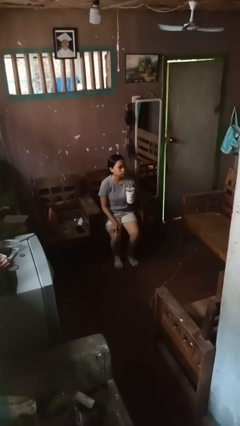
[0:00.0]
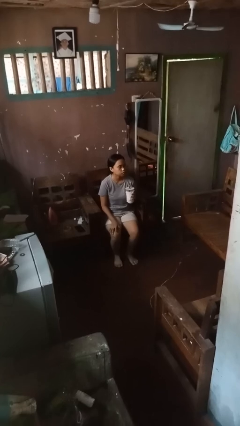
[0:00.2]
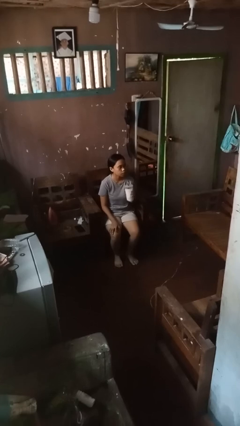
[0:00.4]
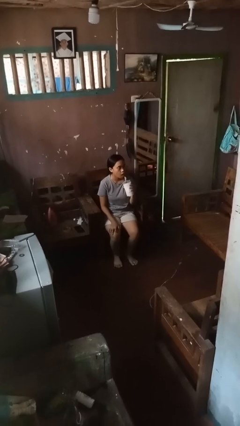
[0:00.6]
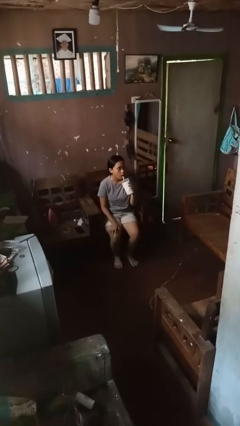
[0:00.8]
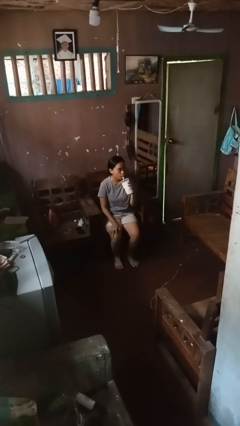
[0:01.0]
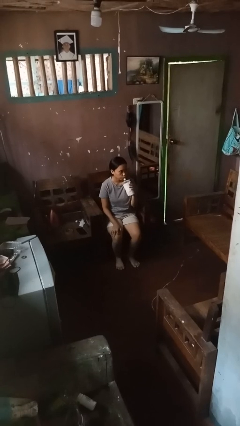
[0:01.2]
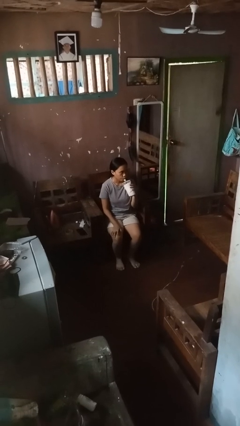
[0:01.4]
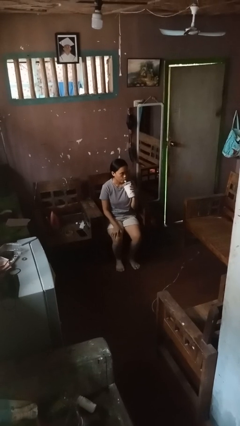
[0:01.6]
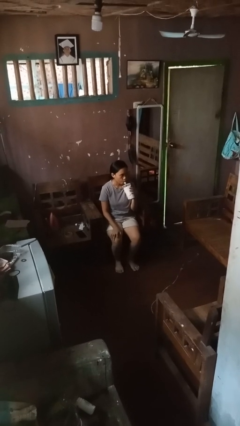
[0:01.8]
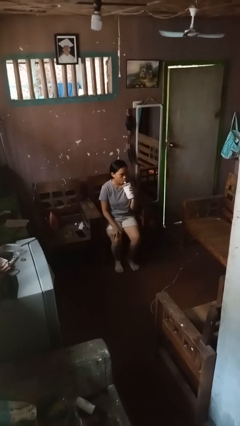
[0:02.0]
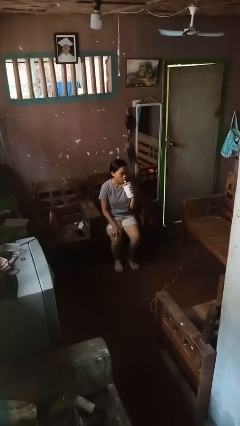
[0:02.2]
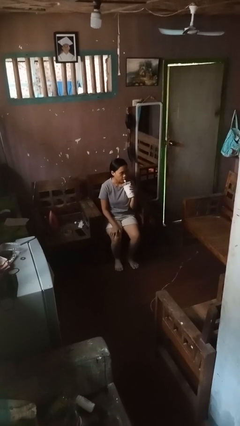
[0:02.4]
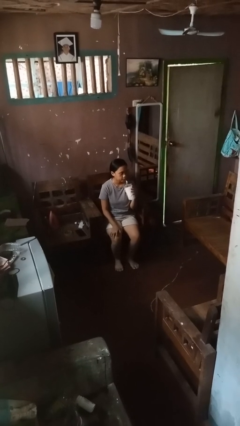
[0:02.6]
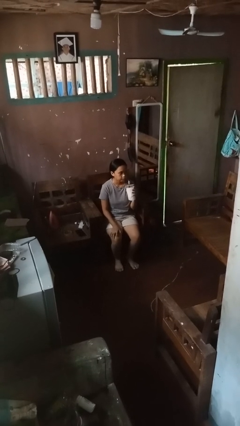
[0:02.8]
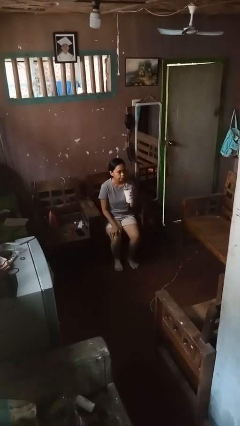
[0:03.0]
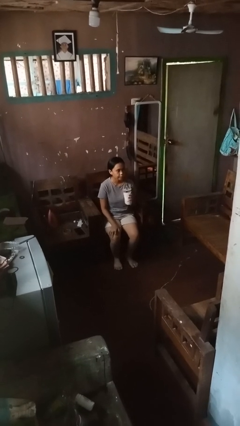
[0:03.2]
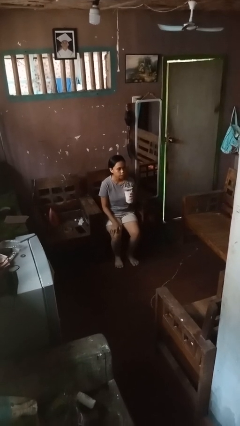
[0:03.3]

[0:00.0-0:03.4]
person drinks from straw

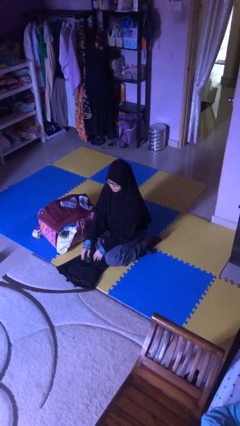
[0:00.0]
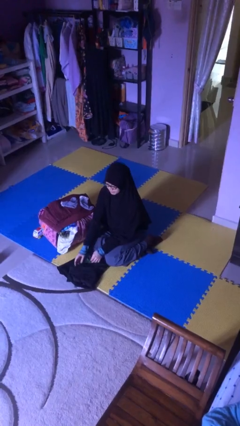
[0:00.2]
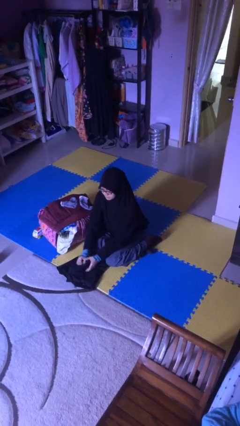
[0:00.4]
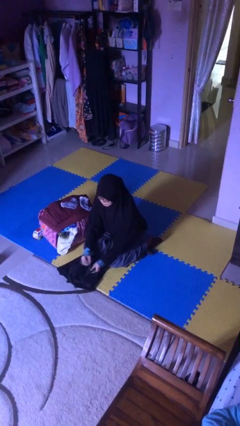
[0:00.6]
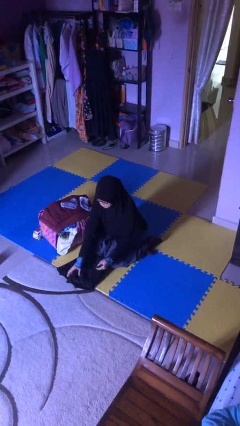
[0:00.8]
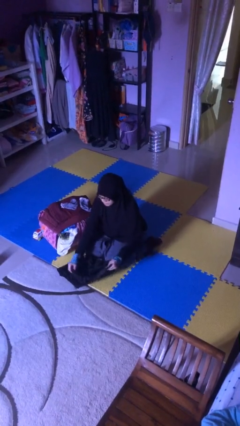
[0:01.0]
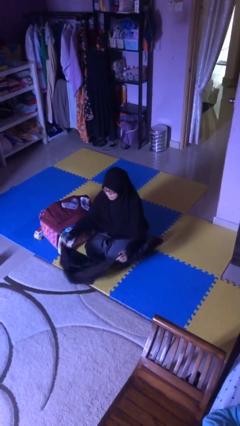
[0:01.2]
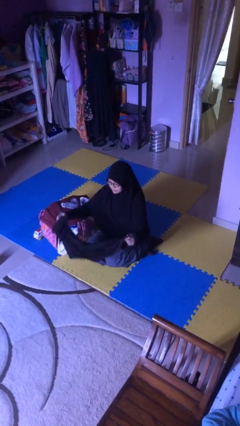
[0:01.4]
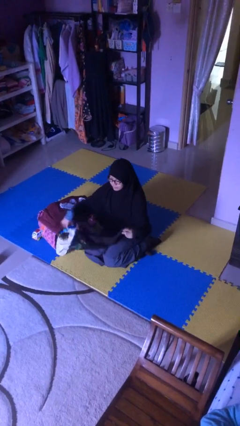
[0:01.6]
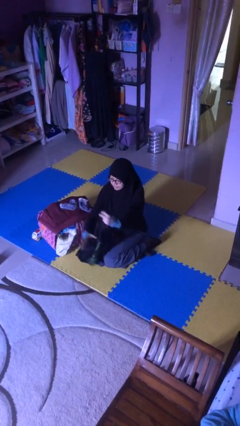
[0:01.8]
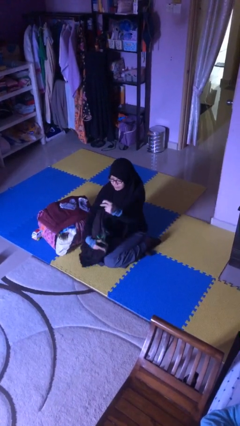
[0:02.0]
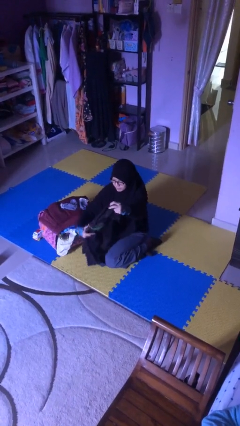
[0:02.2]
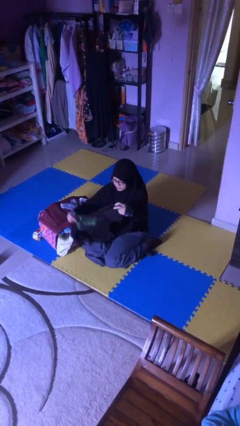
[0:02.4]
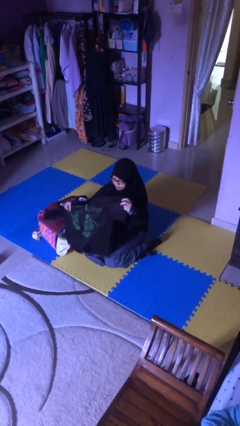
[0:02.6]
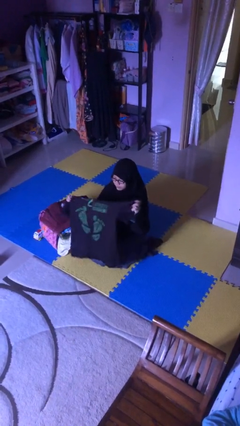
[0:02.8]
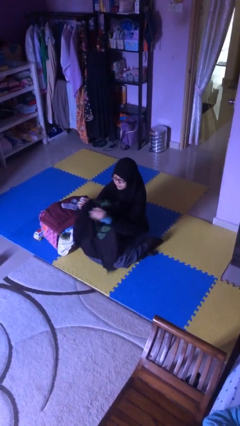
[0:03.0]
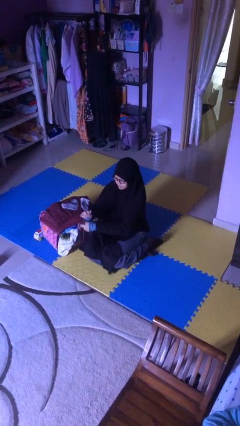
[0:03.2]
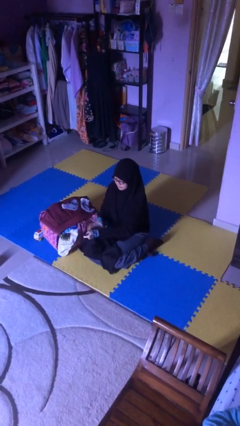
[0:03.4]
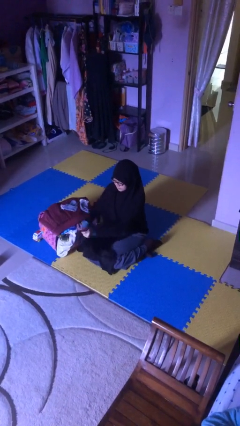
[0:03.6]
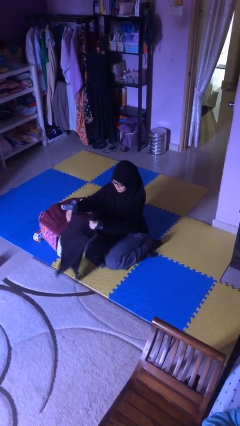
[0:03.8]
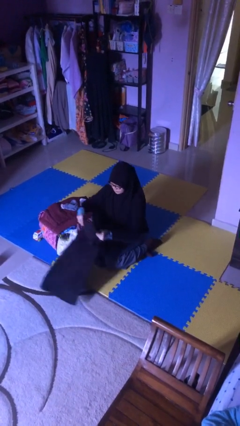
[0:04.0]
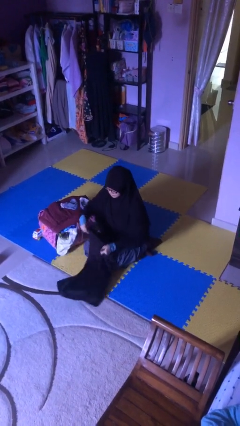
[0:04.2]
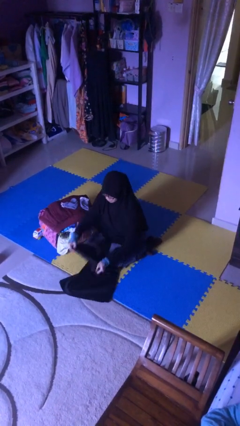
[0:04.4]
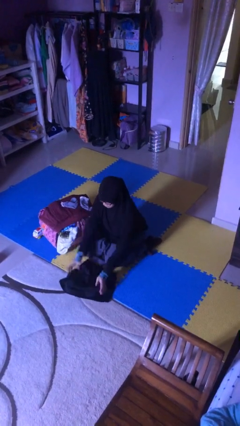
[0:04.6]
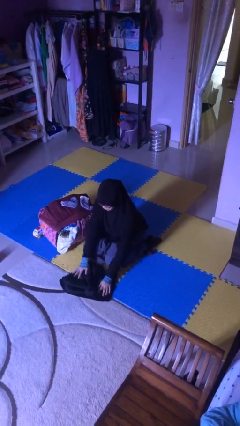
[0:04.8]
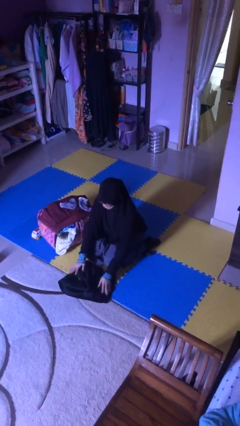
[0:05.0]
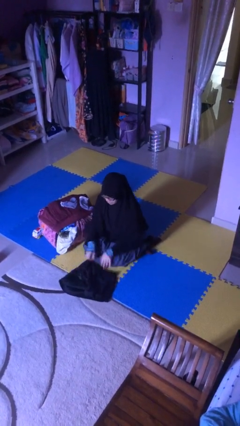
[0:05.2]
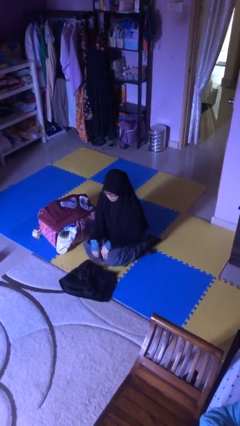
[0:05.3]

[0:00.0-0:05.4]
person folds shirt

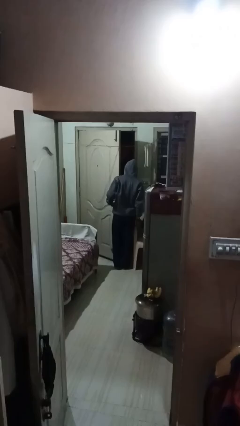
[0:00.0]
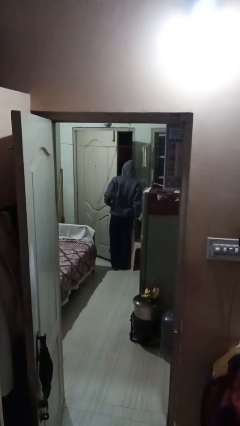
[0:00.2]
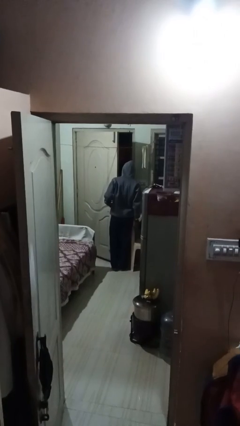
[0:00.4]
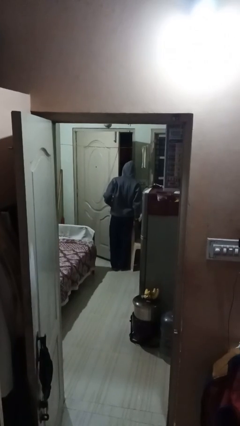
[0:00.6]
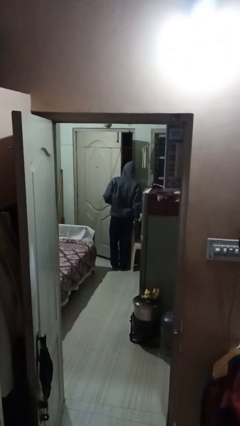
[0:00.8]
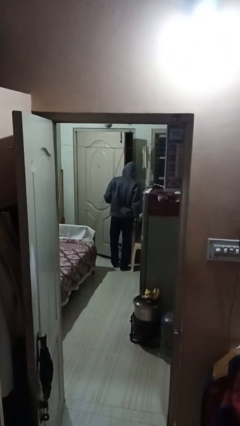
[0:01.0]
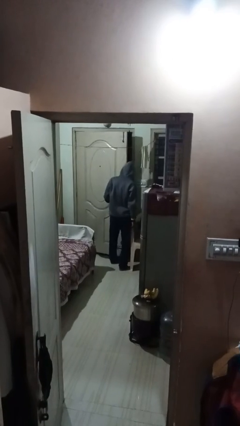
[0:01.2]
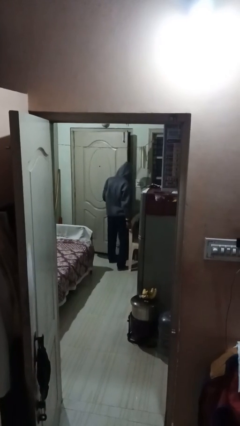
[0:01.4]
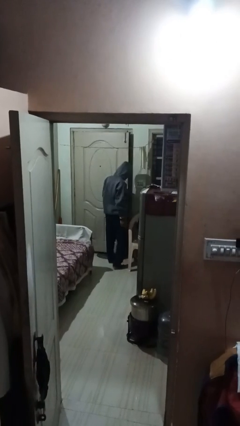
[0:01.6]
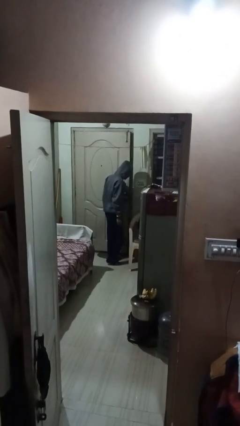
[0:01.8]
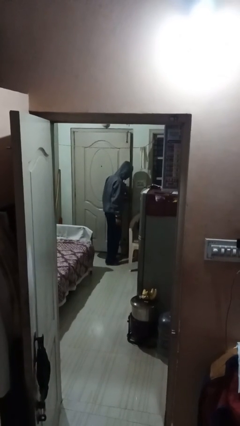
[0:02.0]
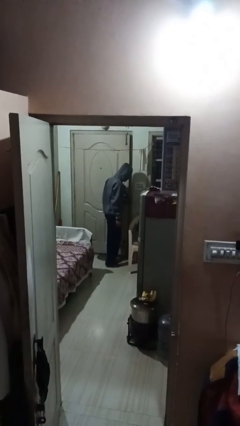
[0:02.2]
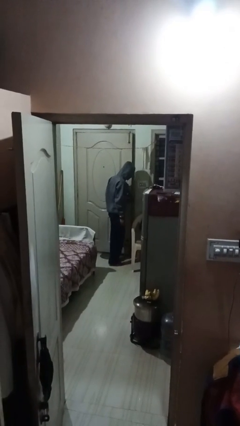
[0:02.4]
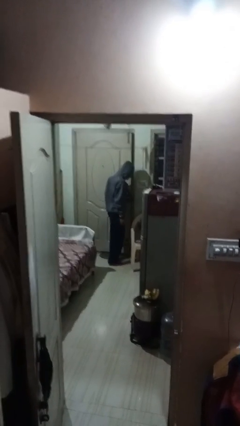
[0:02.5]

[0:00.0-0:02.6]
person closes facility door

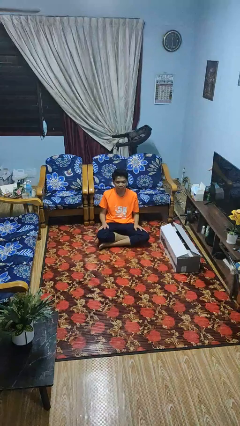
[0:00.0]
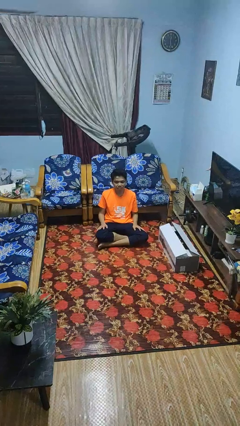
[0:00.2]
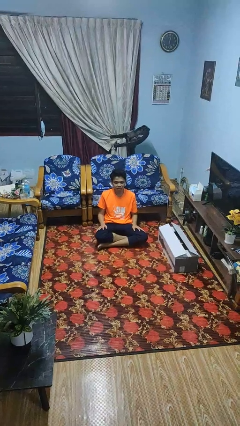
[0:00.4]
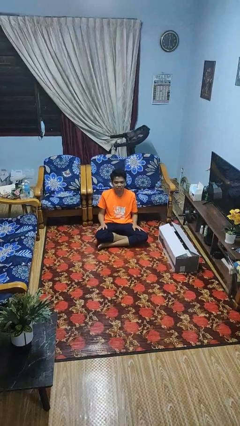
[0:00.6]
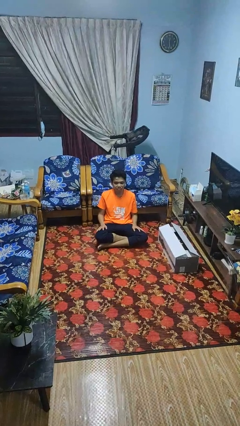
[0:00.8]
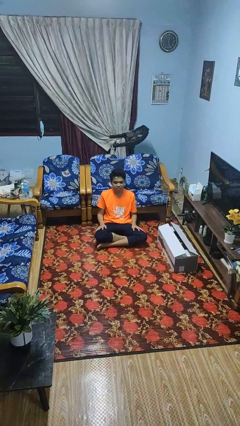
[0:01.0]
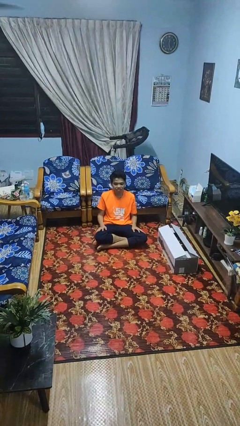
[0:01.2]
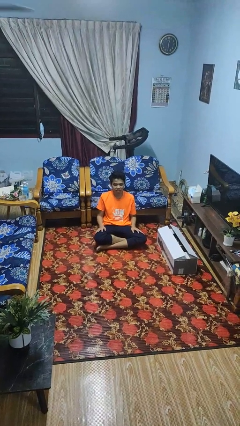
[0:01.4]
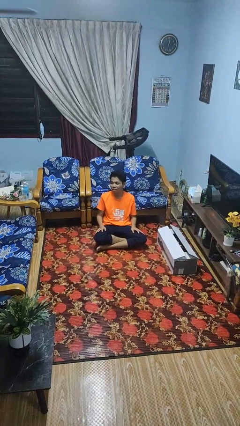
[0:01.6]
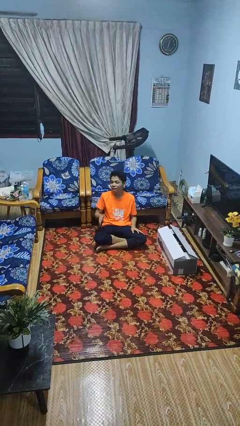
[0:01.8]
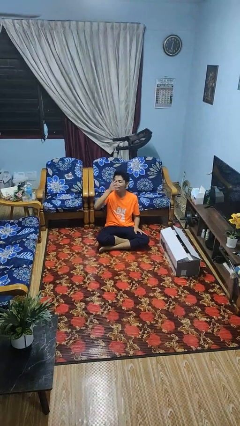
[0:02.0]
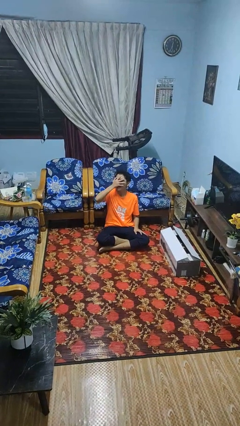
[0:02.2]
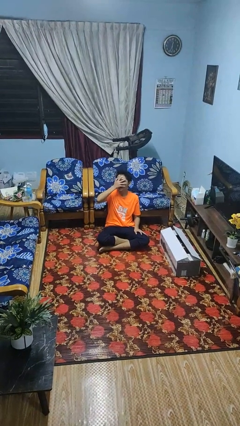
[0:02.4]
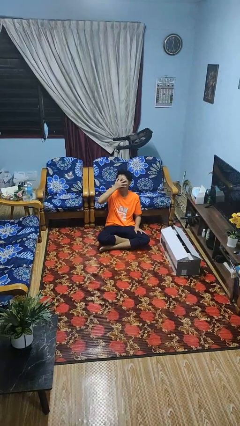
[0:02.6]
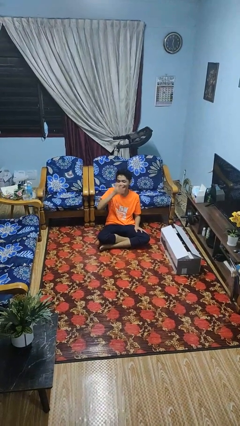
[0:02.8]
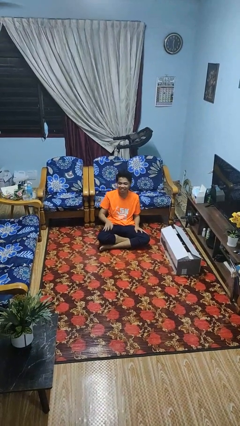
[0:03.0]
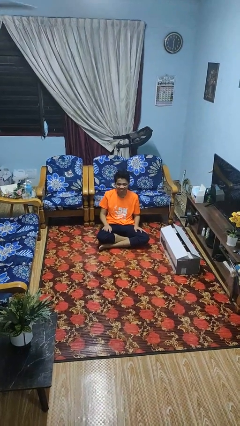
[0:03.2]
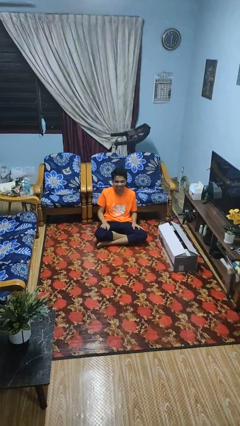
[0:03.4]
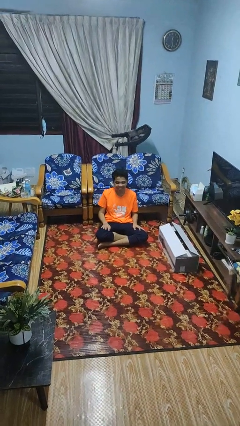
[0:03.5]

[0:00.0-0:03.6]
person covers face with hands

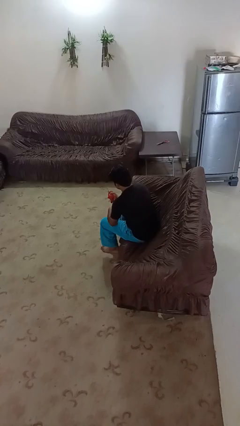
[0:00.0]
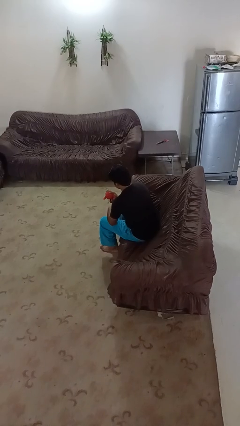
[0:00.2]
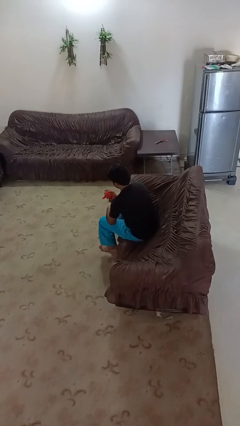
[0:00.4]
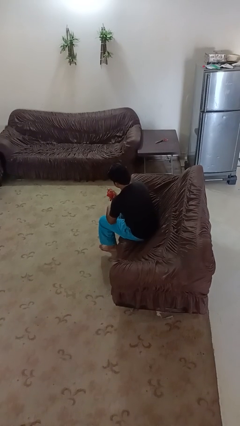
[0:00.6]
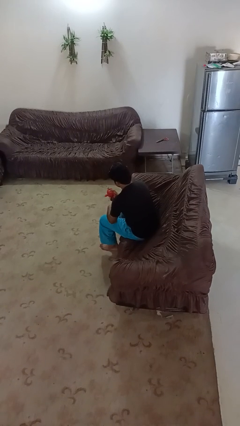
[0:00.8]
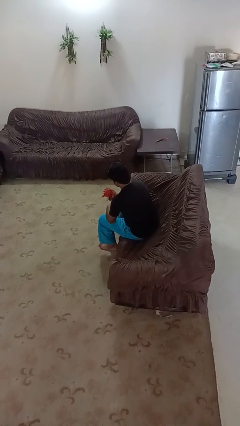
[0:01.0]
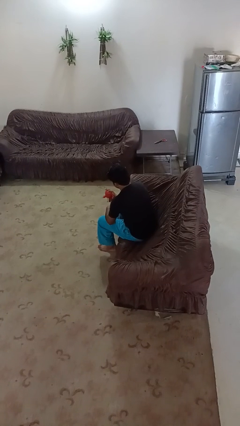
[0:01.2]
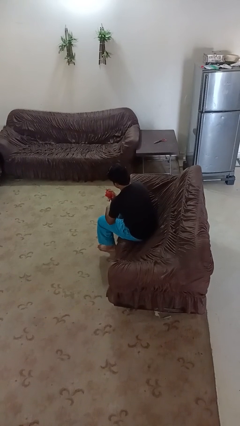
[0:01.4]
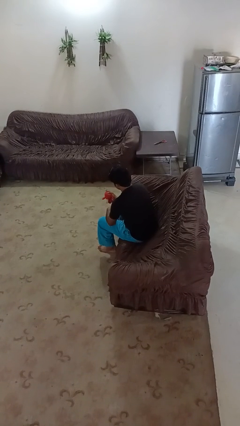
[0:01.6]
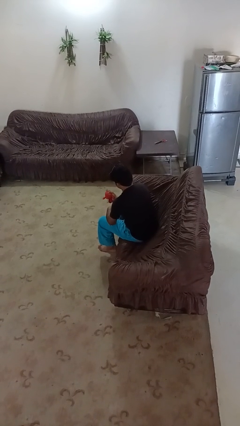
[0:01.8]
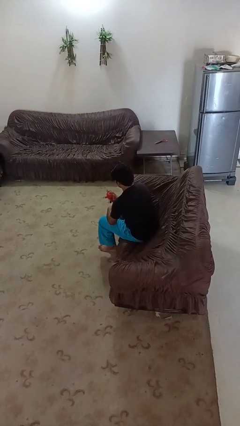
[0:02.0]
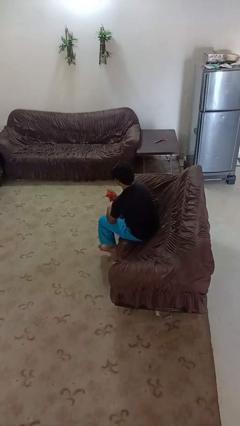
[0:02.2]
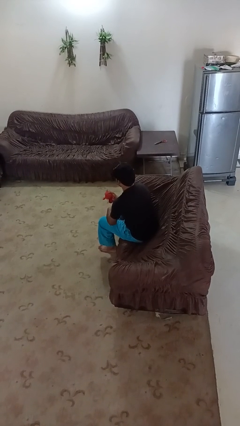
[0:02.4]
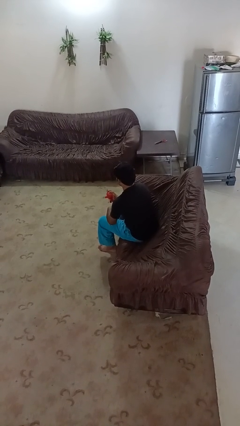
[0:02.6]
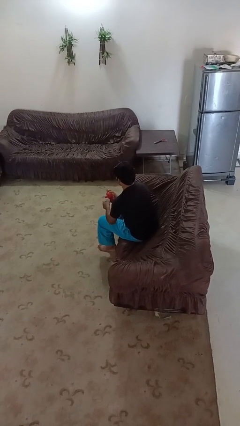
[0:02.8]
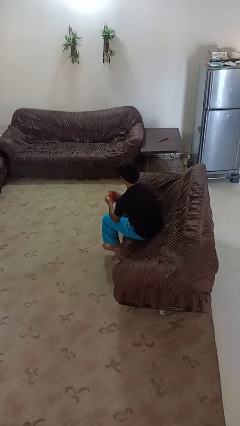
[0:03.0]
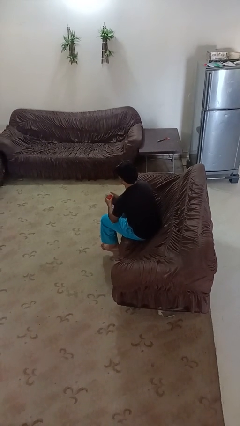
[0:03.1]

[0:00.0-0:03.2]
person squeezes object
